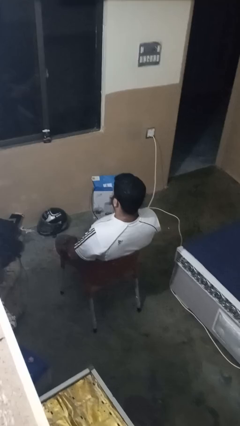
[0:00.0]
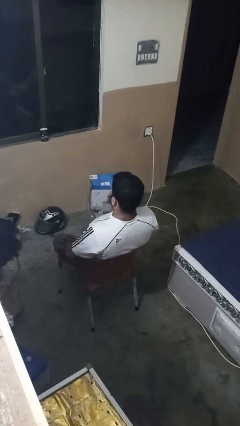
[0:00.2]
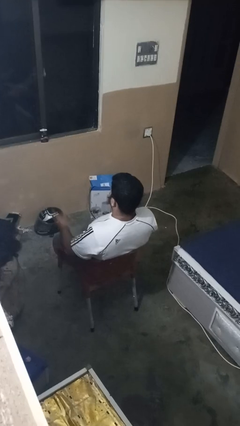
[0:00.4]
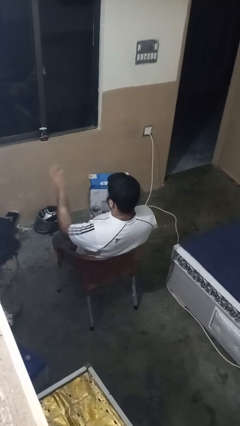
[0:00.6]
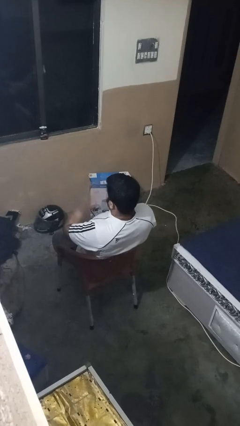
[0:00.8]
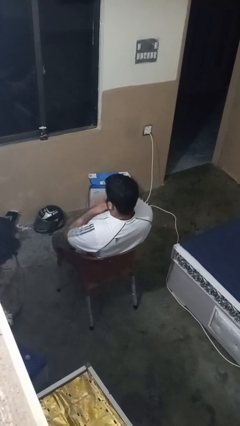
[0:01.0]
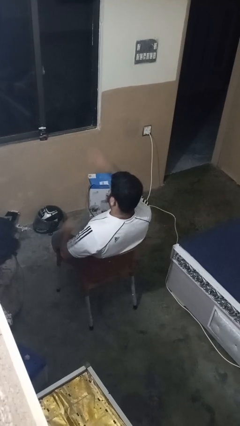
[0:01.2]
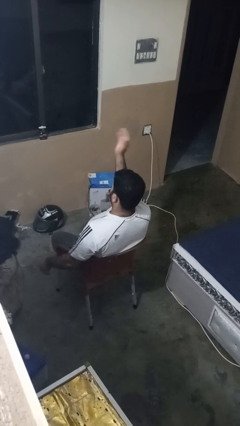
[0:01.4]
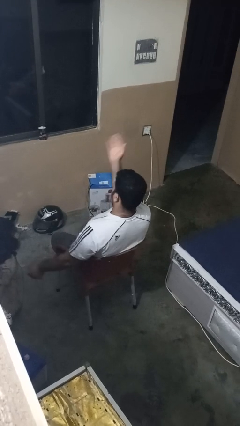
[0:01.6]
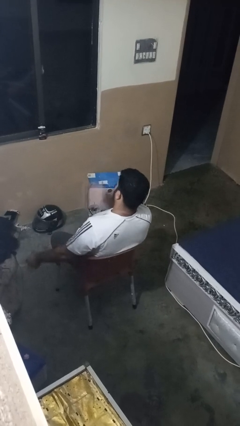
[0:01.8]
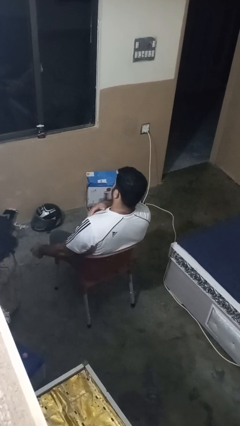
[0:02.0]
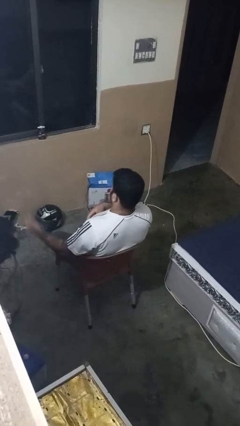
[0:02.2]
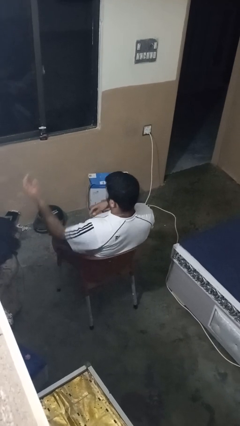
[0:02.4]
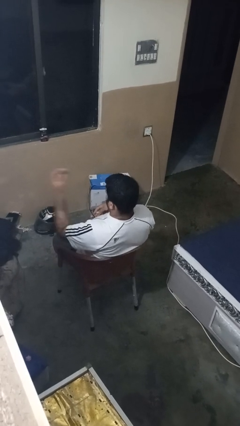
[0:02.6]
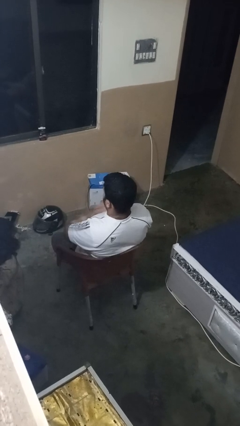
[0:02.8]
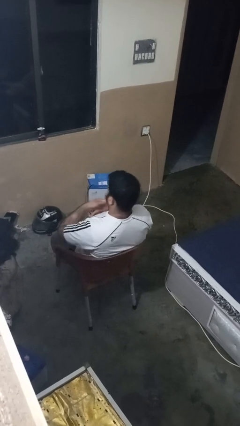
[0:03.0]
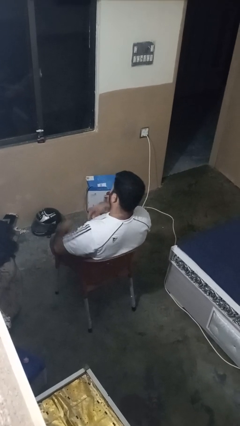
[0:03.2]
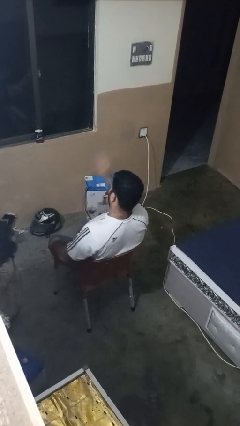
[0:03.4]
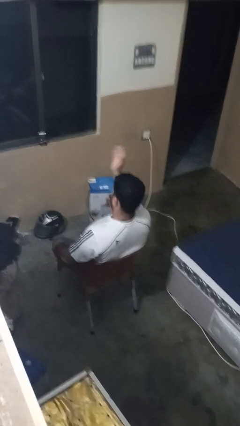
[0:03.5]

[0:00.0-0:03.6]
person drums on chest

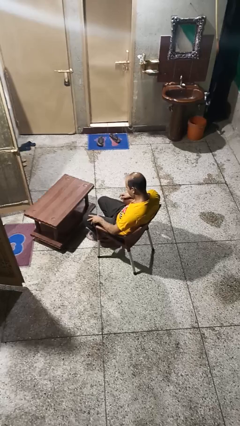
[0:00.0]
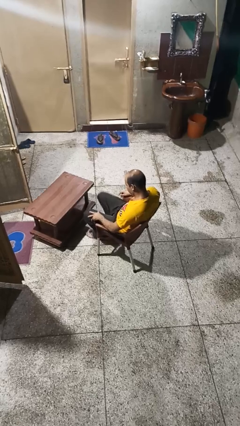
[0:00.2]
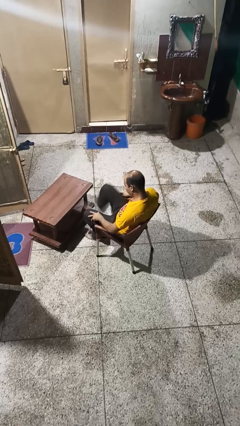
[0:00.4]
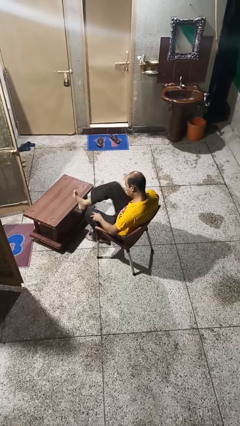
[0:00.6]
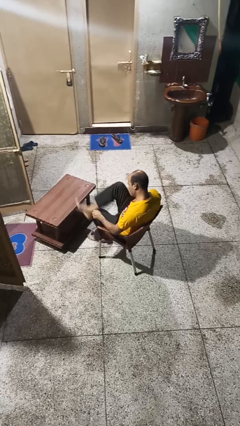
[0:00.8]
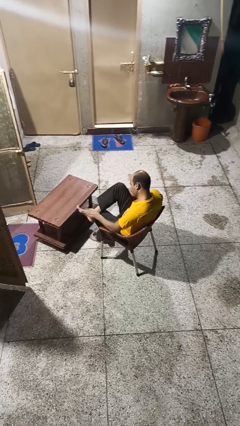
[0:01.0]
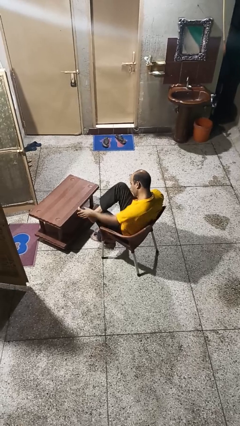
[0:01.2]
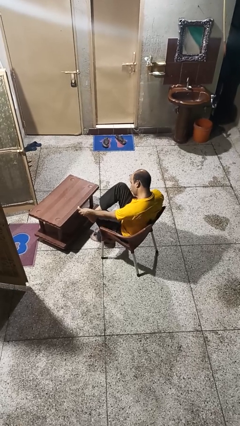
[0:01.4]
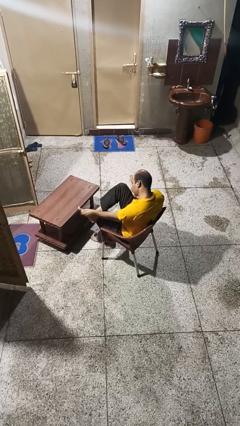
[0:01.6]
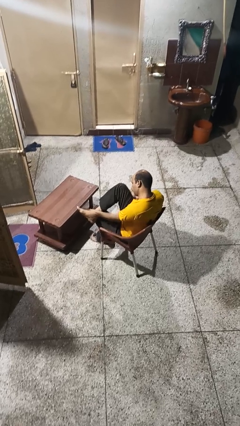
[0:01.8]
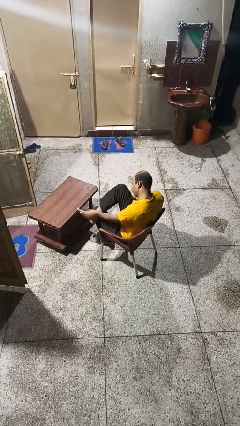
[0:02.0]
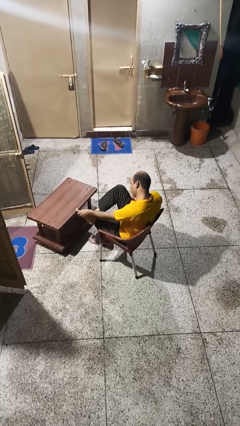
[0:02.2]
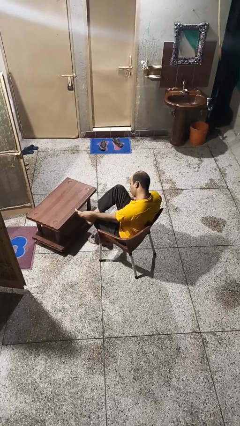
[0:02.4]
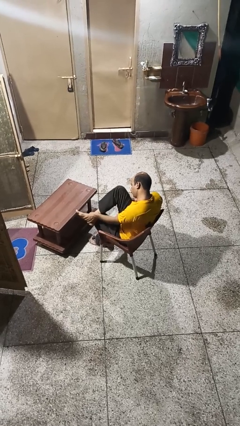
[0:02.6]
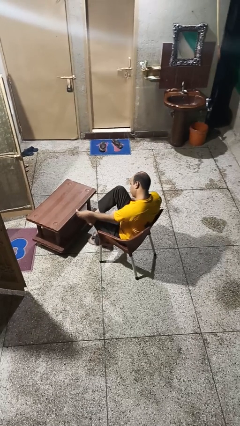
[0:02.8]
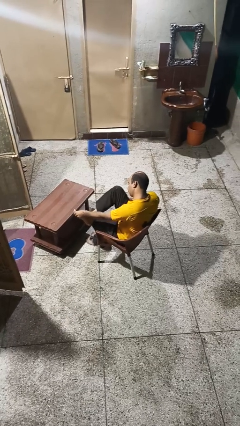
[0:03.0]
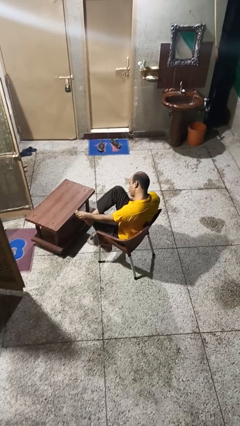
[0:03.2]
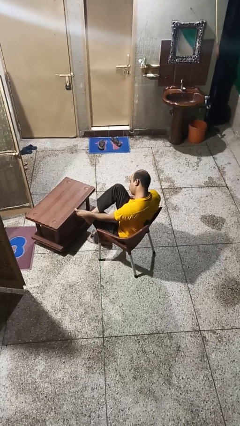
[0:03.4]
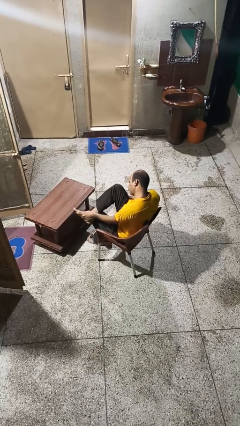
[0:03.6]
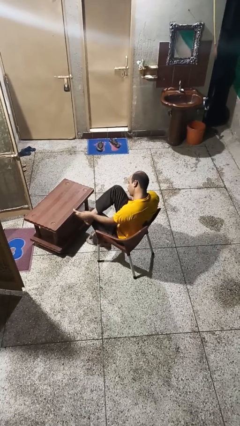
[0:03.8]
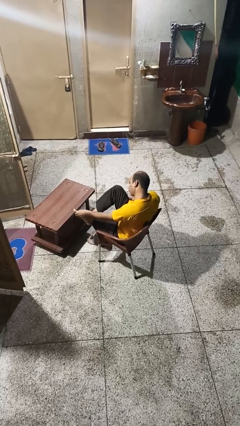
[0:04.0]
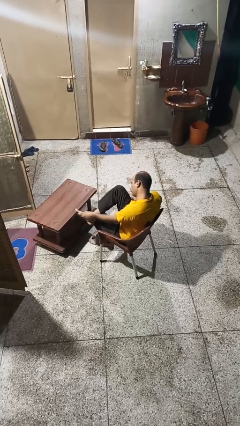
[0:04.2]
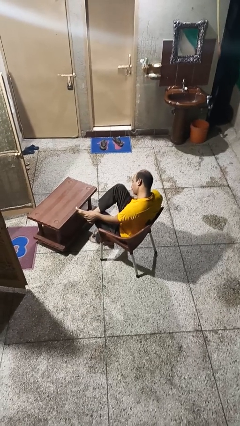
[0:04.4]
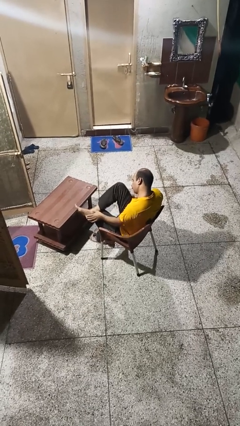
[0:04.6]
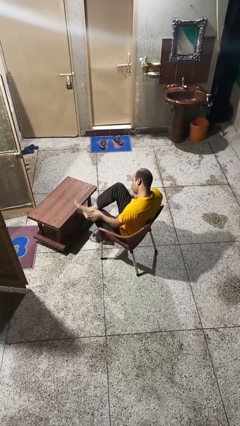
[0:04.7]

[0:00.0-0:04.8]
person rubs foot

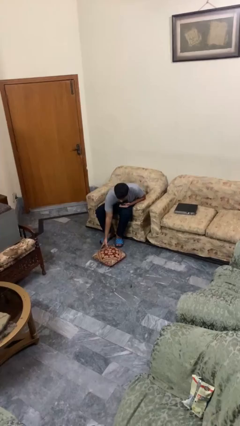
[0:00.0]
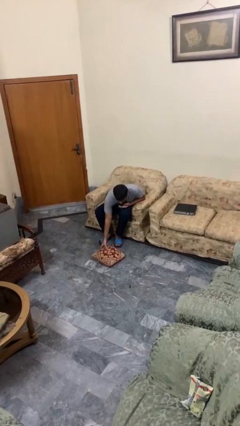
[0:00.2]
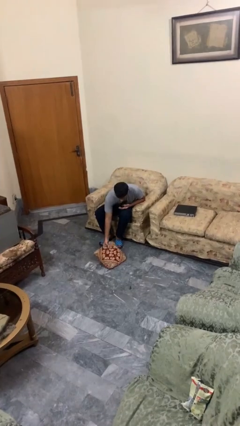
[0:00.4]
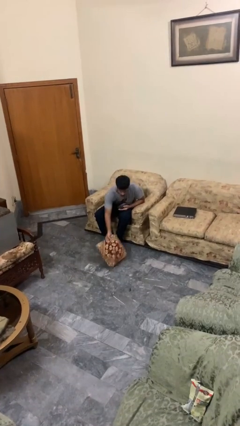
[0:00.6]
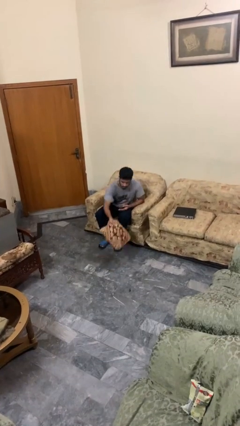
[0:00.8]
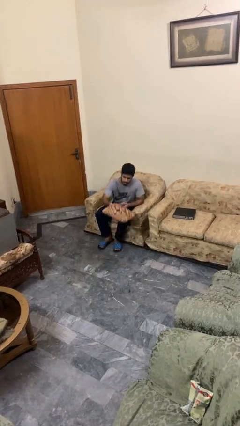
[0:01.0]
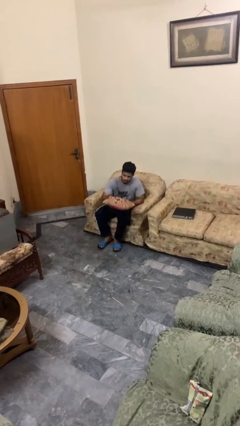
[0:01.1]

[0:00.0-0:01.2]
person picks up object from floor

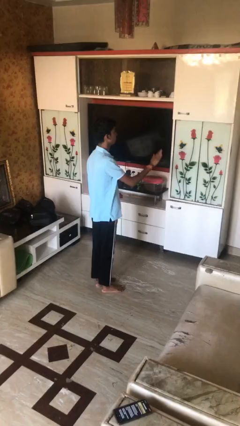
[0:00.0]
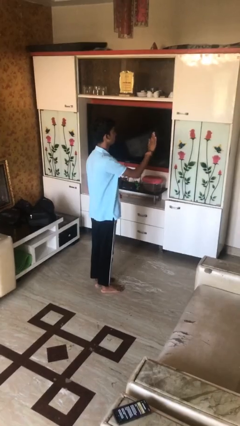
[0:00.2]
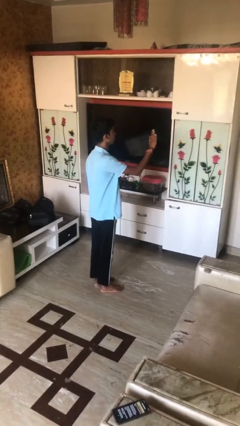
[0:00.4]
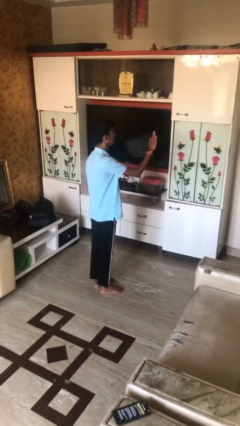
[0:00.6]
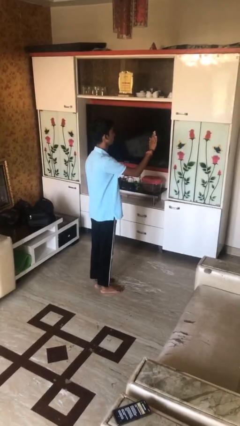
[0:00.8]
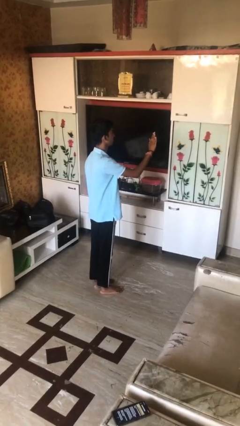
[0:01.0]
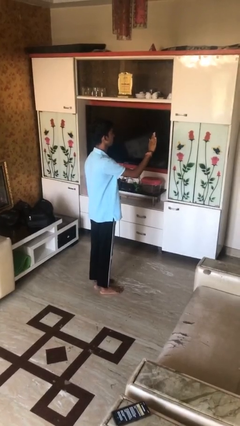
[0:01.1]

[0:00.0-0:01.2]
person gestures swipe up

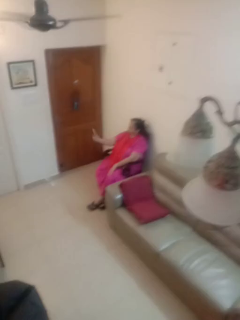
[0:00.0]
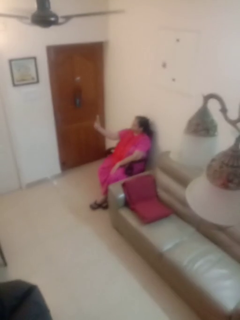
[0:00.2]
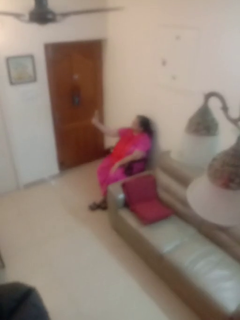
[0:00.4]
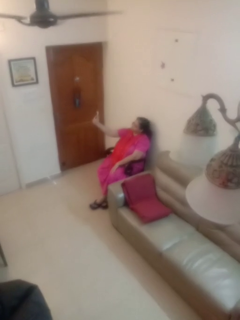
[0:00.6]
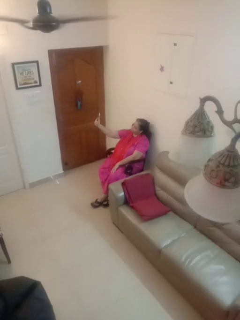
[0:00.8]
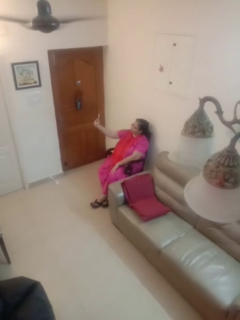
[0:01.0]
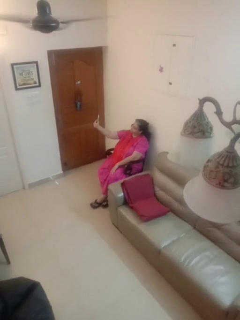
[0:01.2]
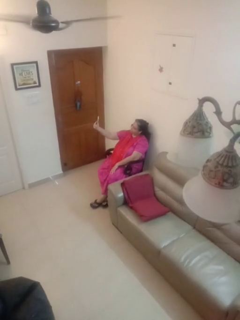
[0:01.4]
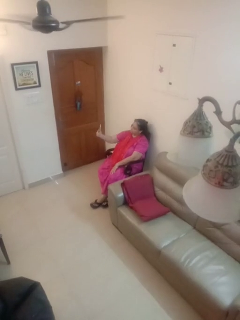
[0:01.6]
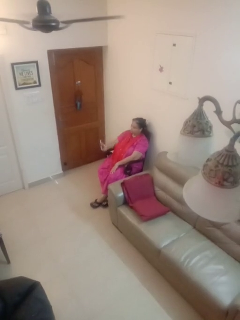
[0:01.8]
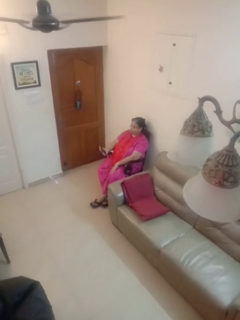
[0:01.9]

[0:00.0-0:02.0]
person takes selfie

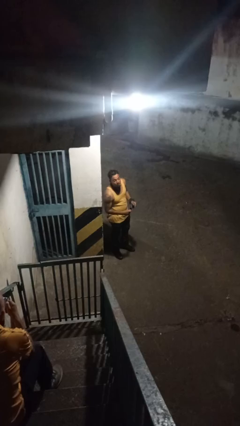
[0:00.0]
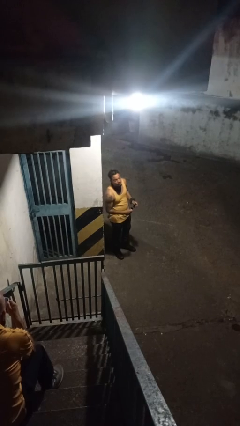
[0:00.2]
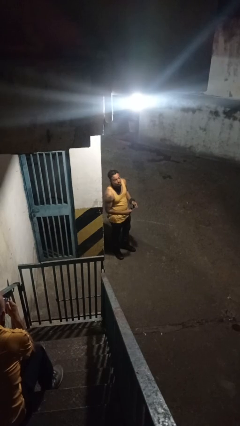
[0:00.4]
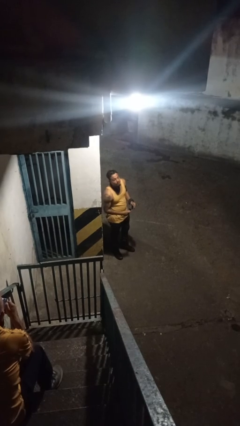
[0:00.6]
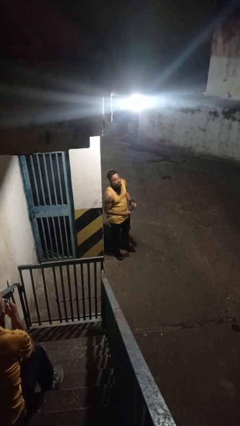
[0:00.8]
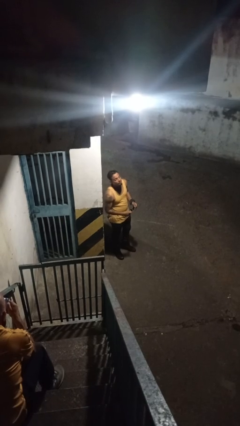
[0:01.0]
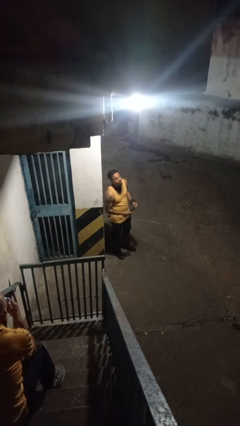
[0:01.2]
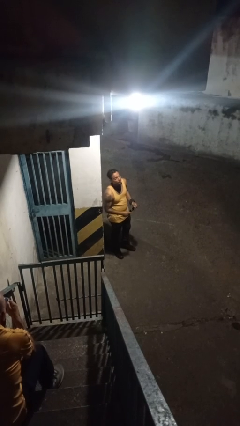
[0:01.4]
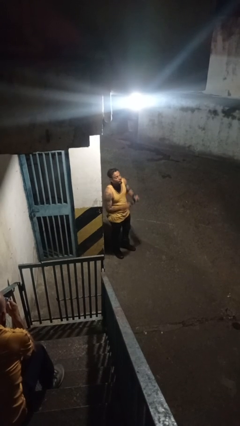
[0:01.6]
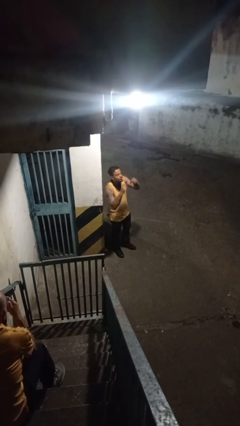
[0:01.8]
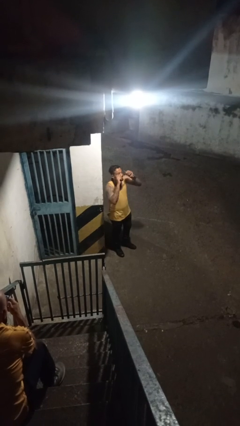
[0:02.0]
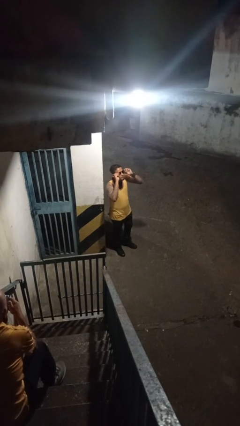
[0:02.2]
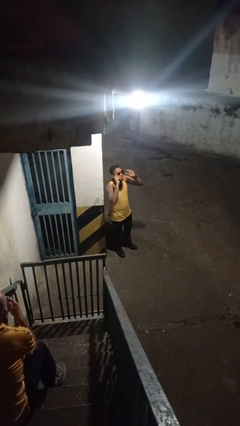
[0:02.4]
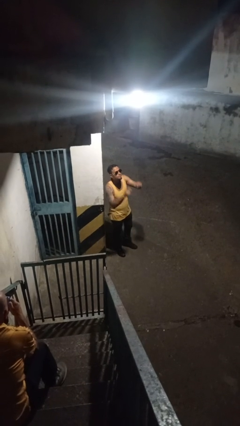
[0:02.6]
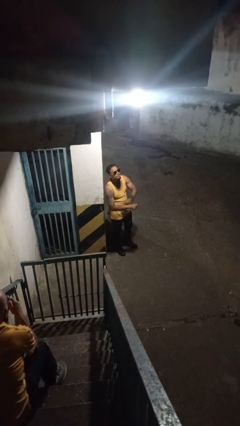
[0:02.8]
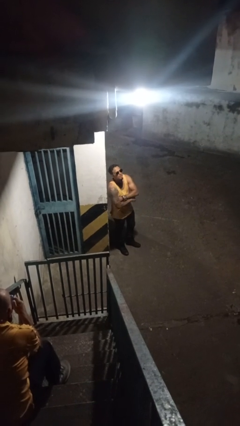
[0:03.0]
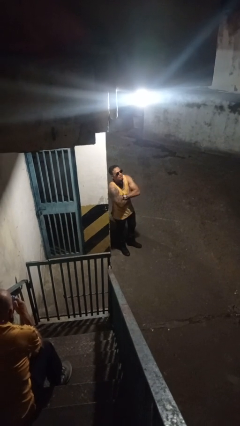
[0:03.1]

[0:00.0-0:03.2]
person puts on sunglasses

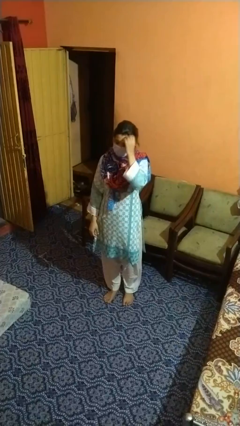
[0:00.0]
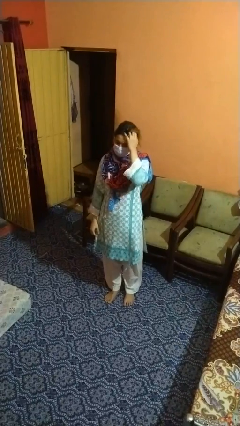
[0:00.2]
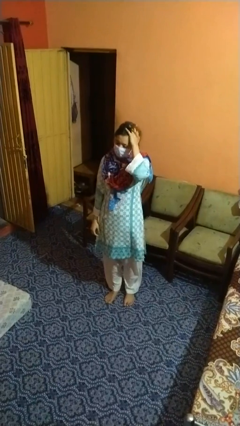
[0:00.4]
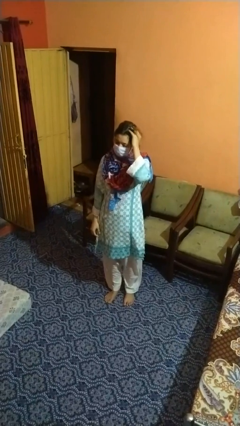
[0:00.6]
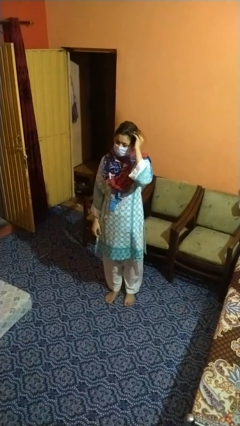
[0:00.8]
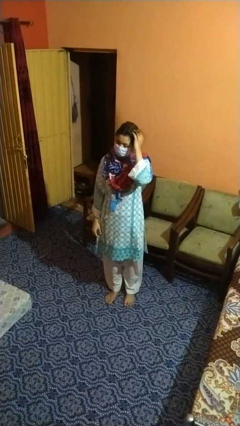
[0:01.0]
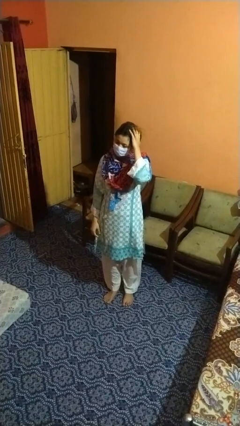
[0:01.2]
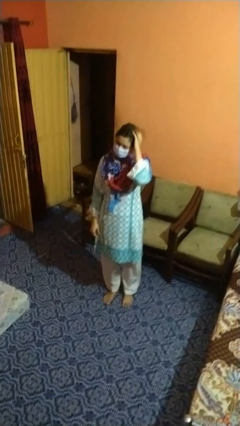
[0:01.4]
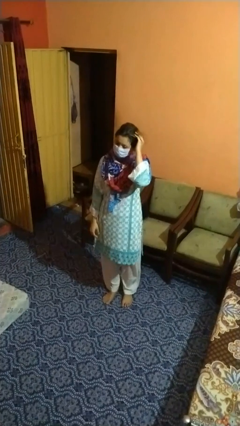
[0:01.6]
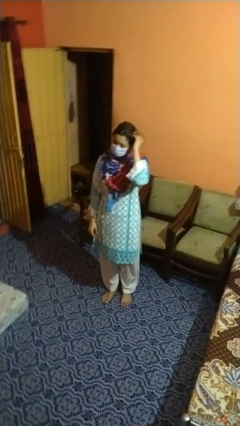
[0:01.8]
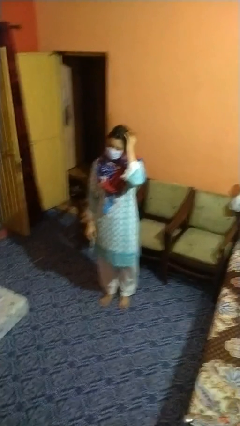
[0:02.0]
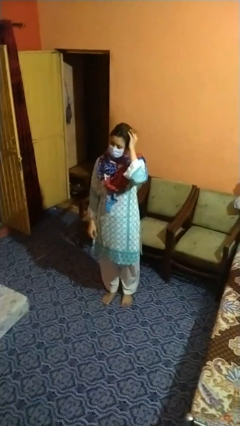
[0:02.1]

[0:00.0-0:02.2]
person strokes hair
